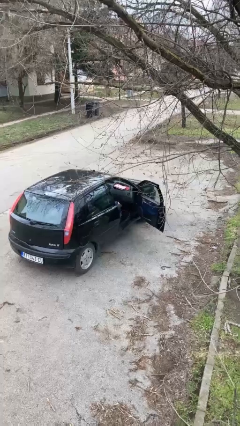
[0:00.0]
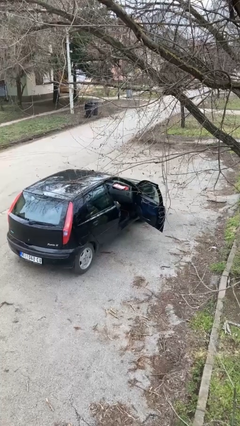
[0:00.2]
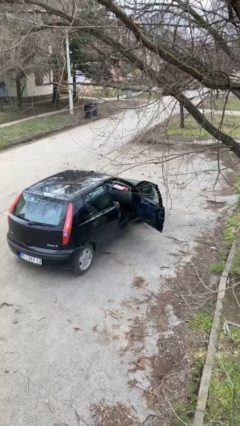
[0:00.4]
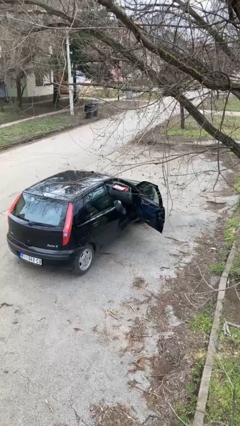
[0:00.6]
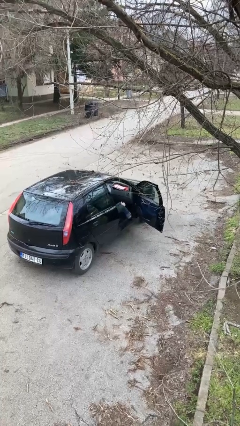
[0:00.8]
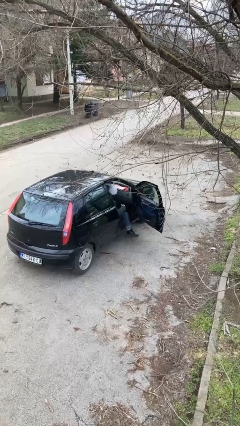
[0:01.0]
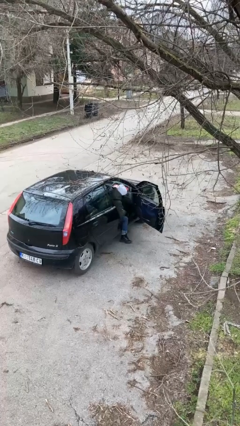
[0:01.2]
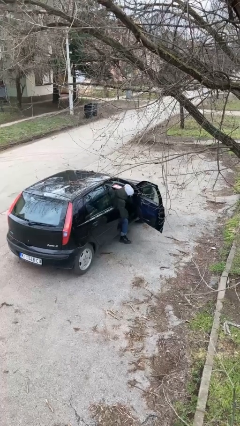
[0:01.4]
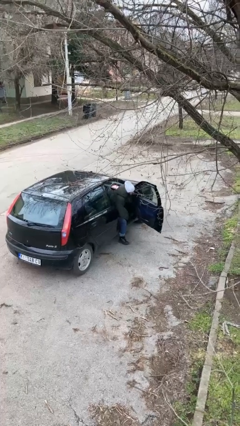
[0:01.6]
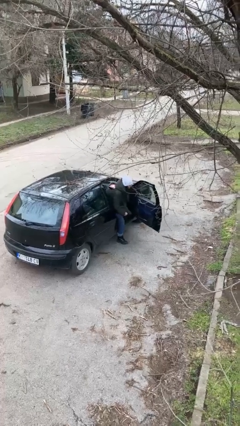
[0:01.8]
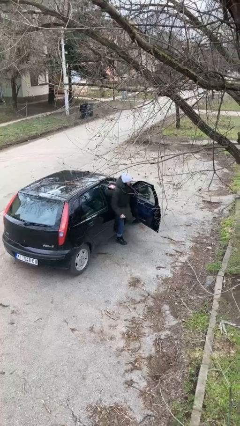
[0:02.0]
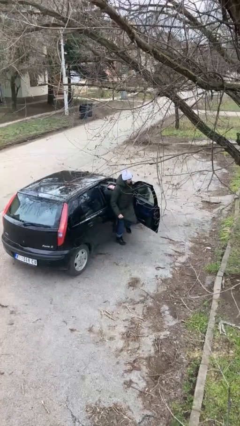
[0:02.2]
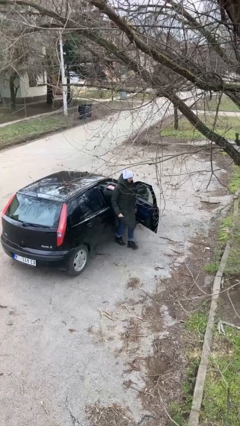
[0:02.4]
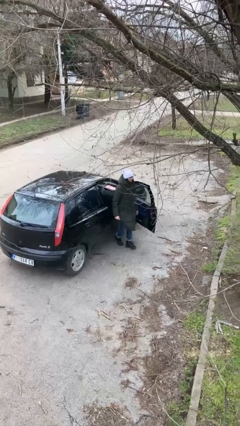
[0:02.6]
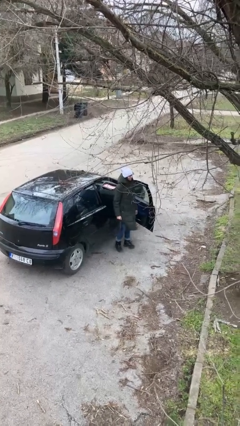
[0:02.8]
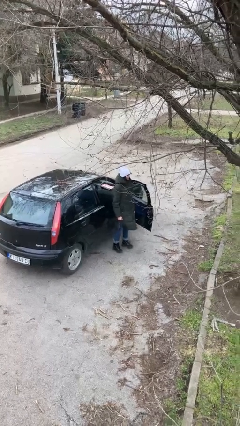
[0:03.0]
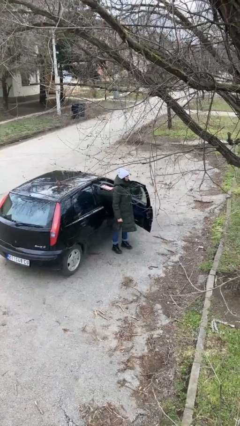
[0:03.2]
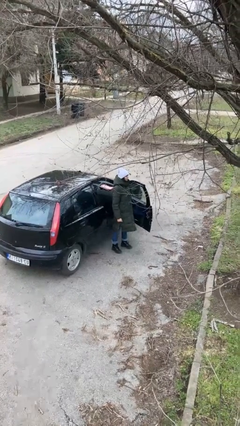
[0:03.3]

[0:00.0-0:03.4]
person exits car

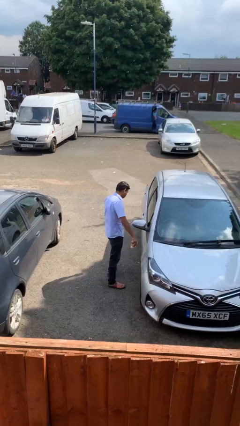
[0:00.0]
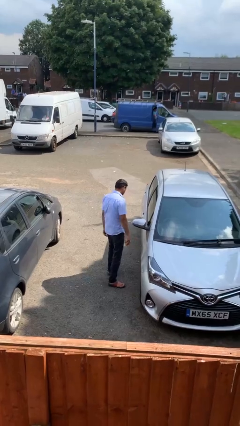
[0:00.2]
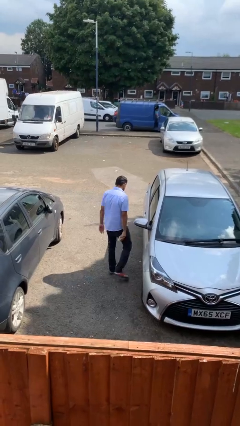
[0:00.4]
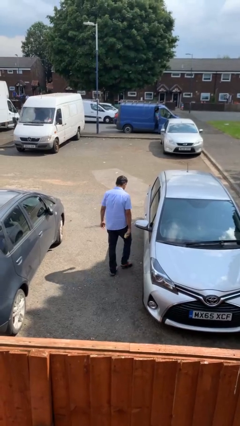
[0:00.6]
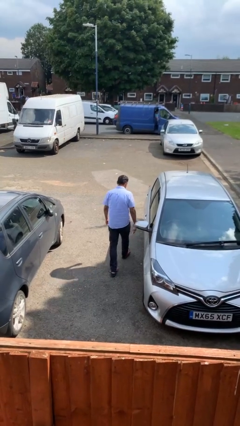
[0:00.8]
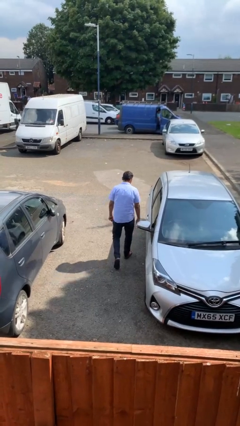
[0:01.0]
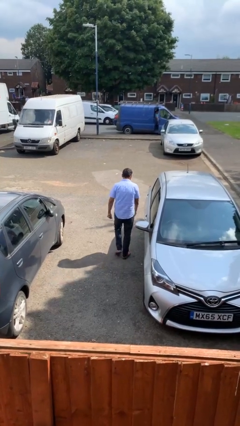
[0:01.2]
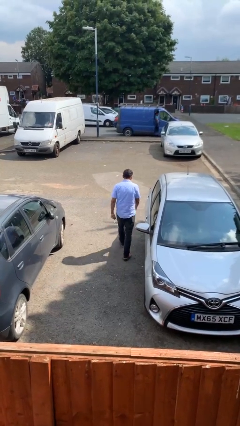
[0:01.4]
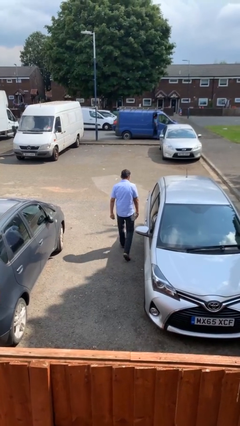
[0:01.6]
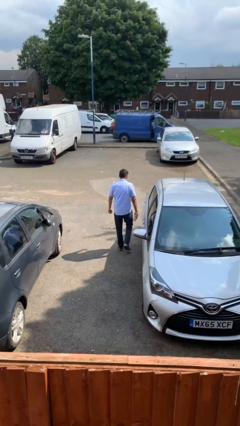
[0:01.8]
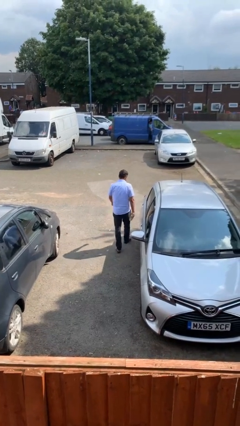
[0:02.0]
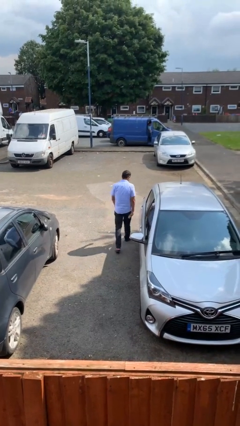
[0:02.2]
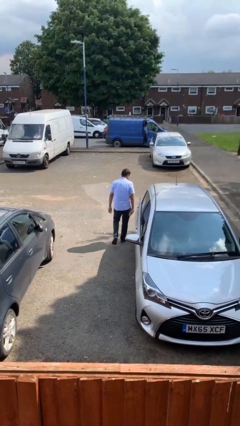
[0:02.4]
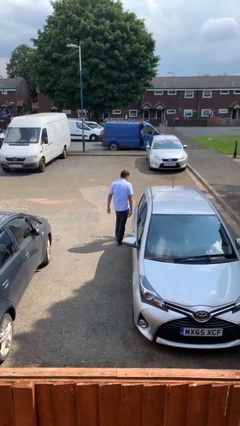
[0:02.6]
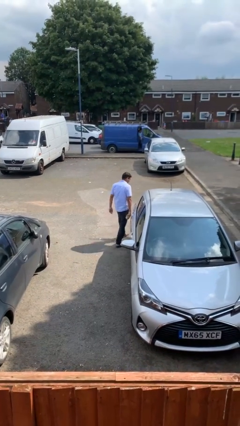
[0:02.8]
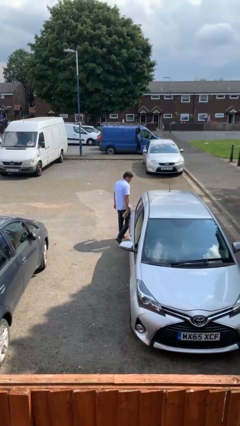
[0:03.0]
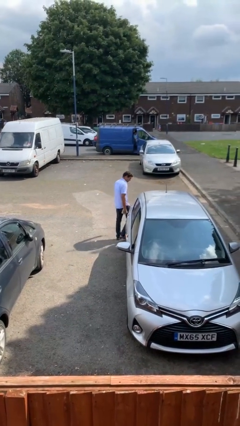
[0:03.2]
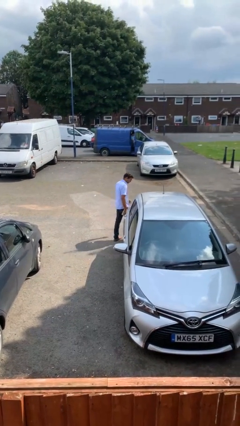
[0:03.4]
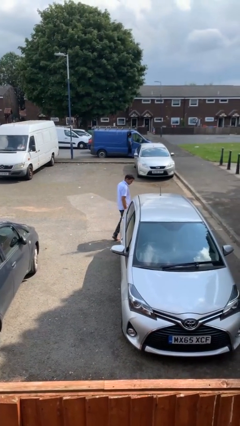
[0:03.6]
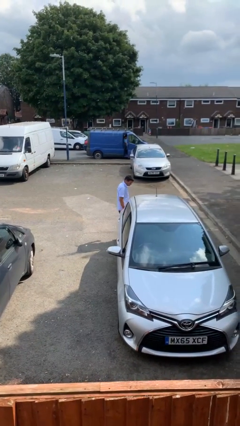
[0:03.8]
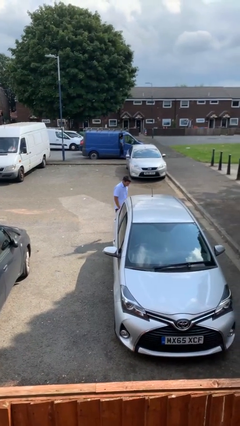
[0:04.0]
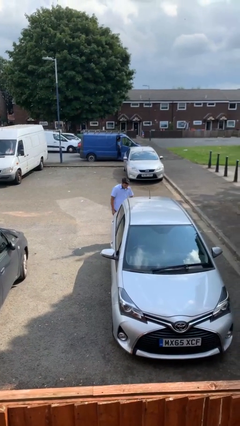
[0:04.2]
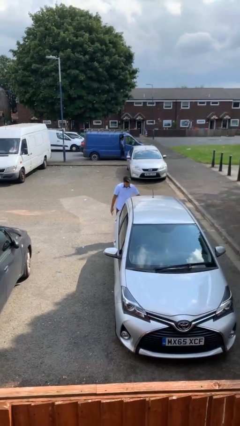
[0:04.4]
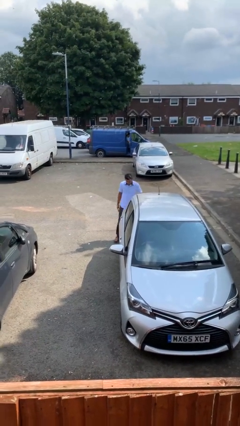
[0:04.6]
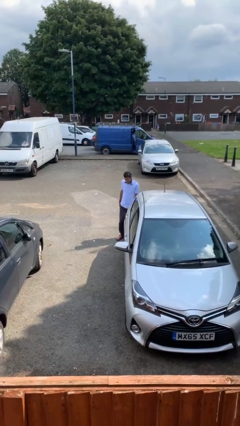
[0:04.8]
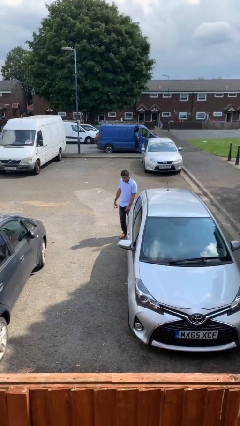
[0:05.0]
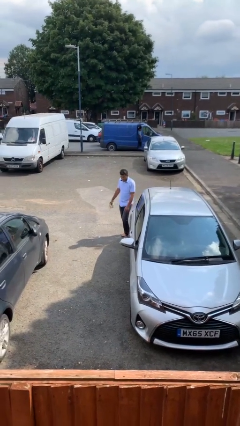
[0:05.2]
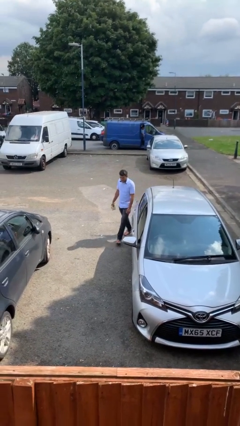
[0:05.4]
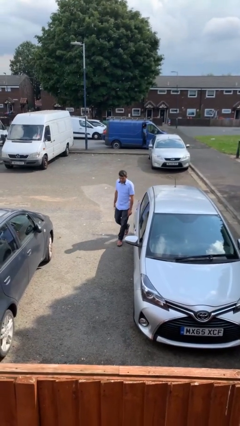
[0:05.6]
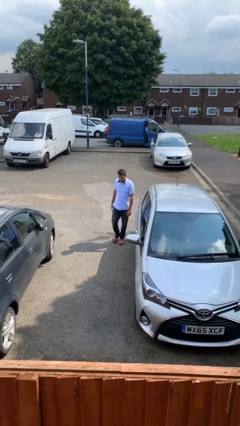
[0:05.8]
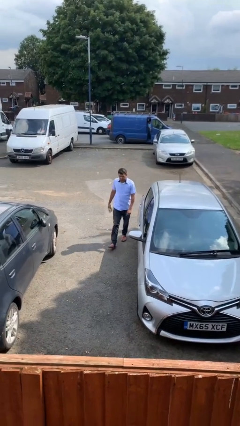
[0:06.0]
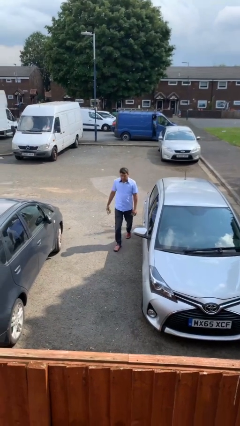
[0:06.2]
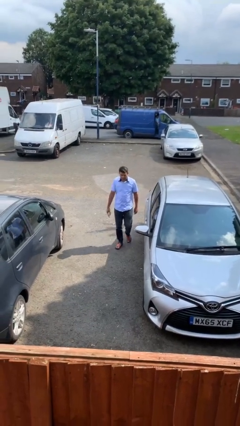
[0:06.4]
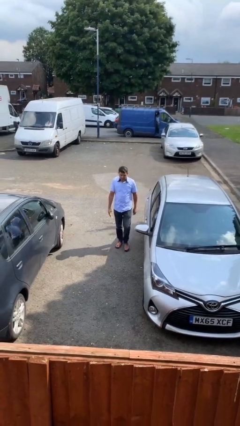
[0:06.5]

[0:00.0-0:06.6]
person walks around car

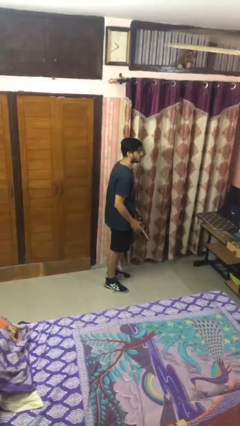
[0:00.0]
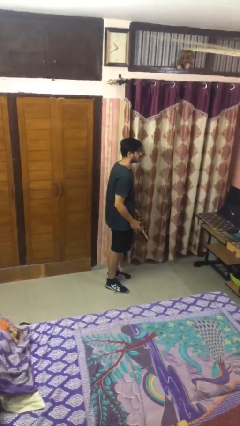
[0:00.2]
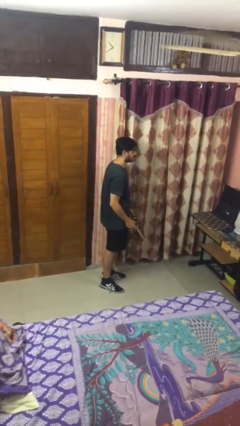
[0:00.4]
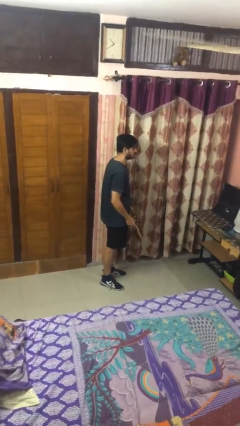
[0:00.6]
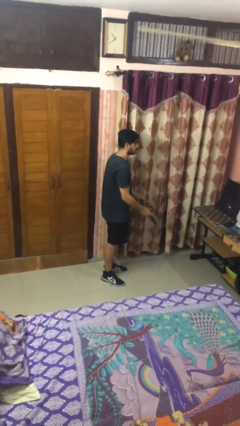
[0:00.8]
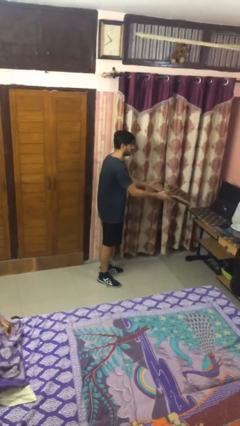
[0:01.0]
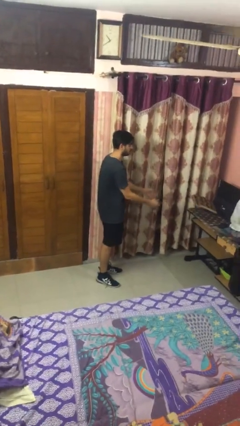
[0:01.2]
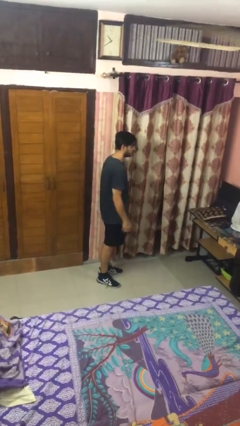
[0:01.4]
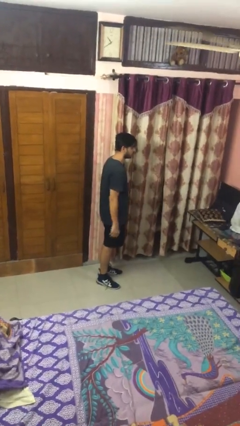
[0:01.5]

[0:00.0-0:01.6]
person throws object on table

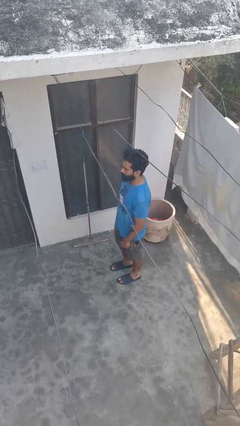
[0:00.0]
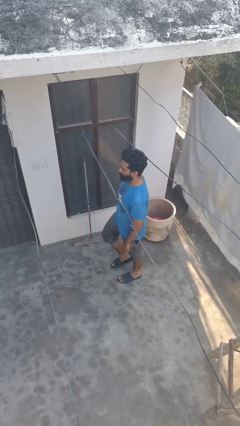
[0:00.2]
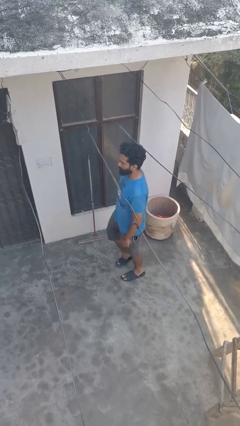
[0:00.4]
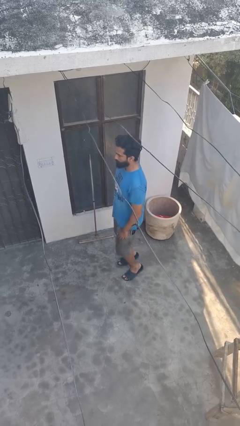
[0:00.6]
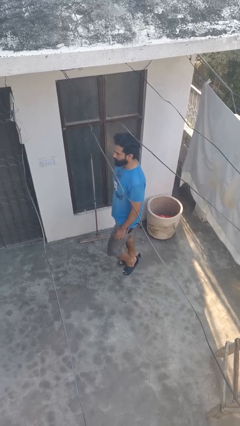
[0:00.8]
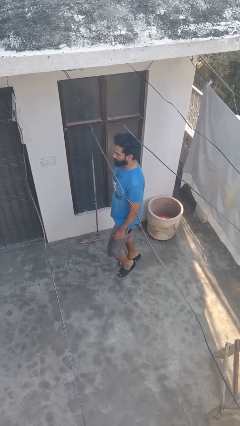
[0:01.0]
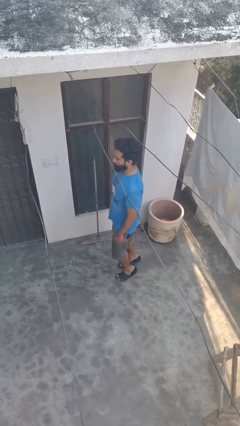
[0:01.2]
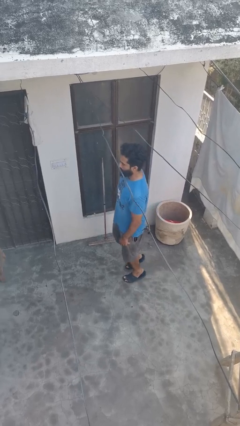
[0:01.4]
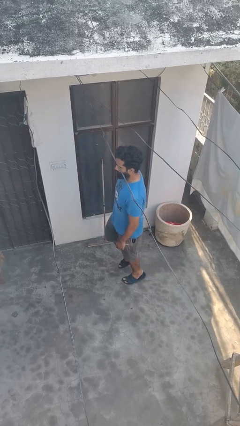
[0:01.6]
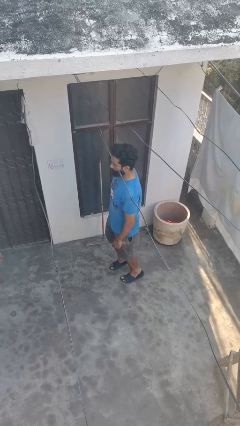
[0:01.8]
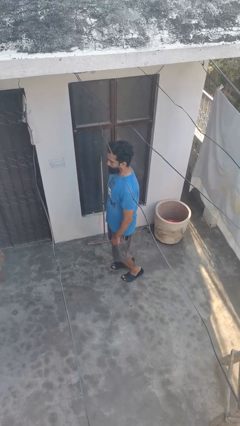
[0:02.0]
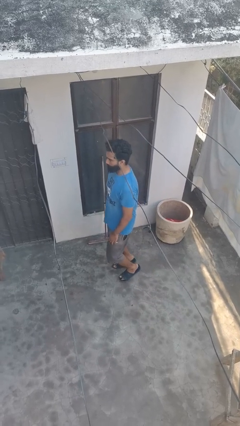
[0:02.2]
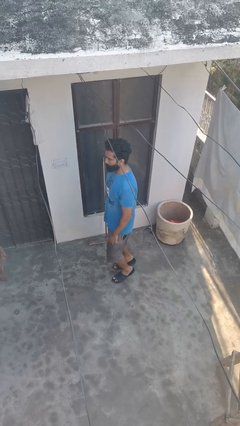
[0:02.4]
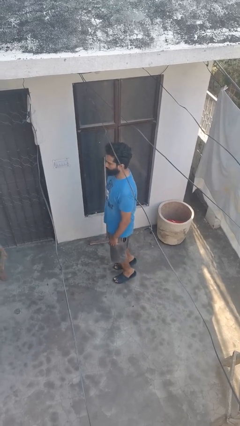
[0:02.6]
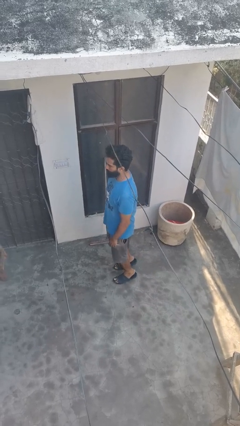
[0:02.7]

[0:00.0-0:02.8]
person walks tiptoe

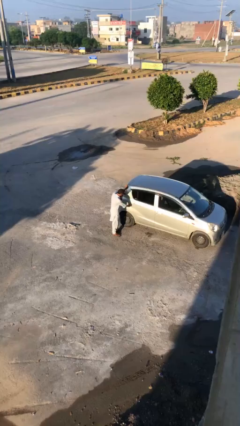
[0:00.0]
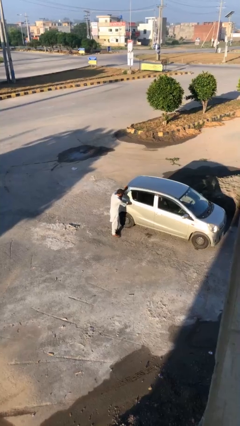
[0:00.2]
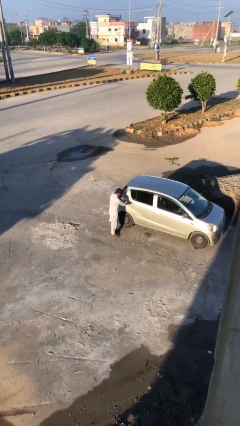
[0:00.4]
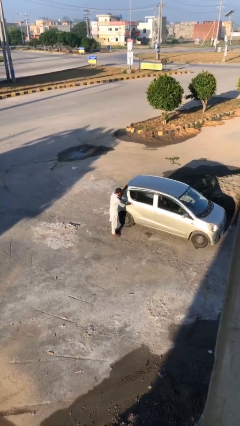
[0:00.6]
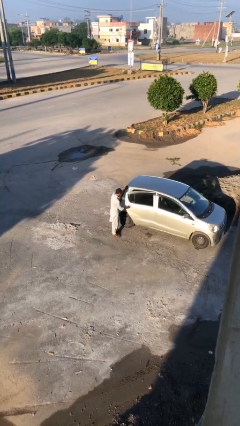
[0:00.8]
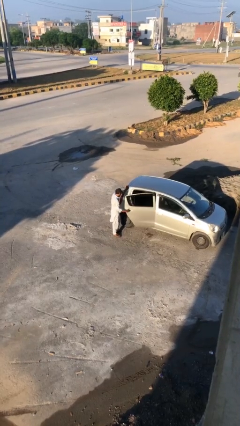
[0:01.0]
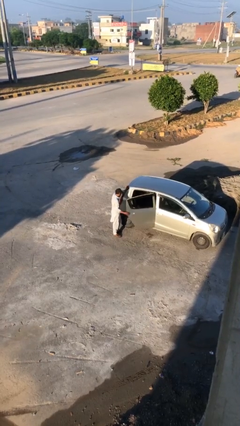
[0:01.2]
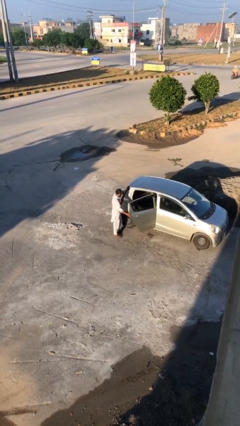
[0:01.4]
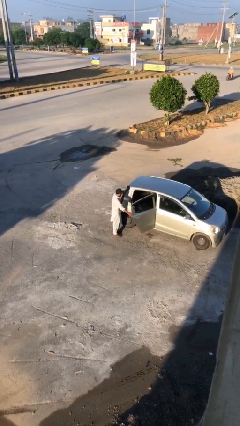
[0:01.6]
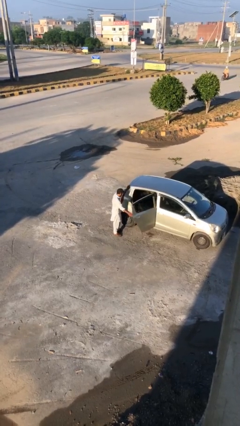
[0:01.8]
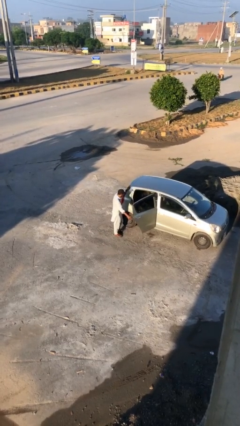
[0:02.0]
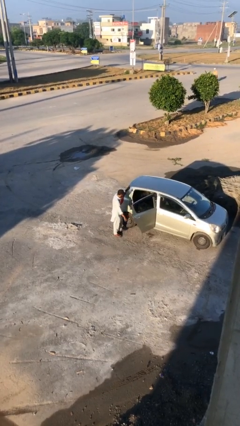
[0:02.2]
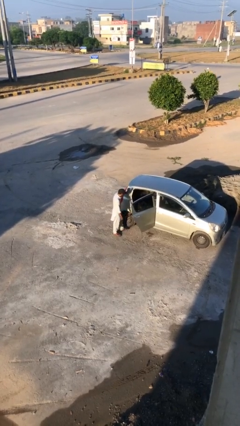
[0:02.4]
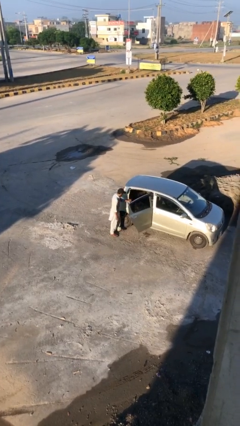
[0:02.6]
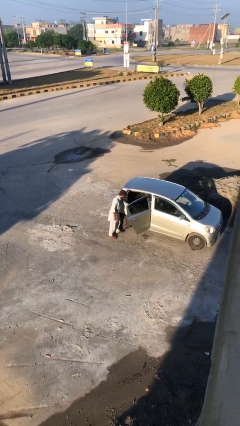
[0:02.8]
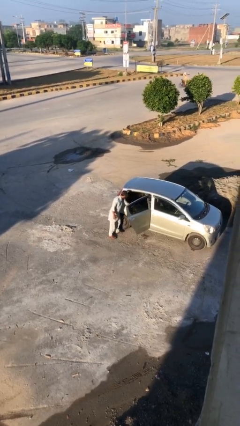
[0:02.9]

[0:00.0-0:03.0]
person opens car door
